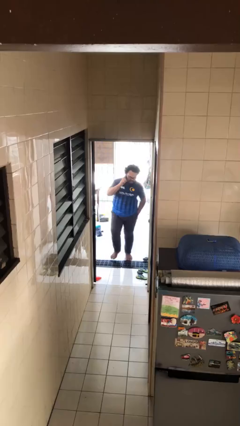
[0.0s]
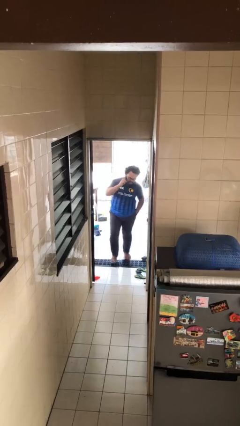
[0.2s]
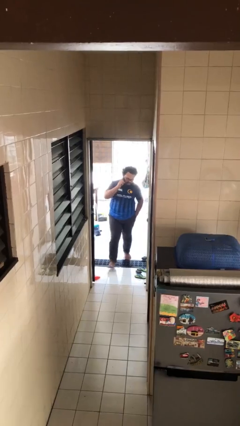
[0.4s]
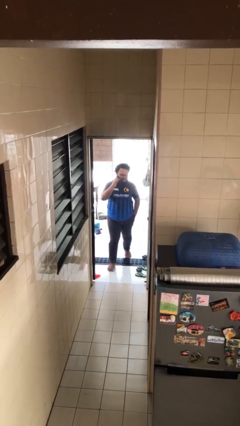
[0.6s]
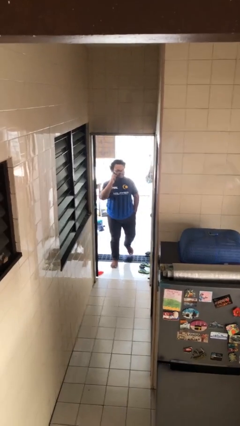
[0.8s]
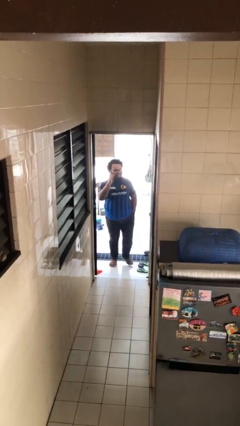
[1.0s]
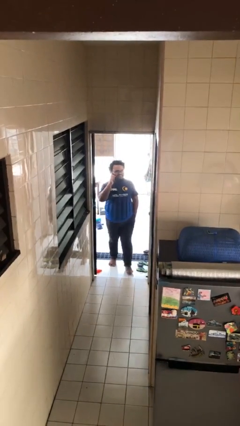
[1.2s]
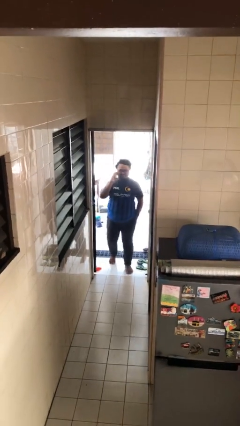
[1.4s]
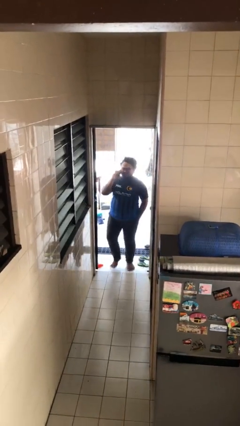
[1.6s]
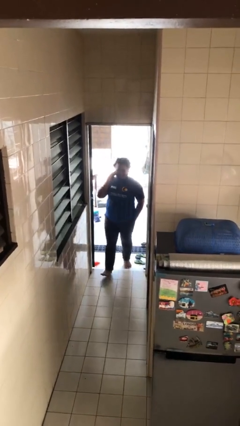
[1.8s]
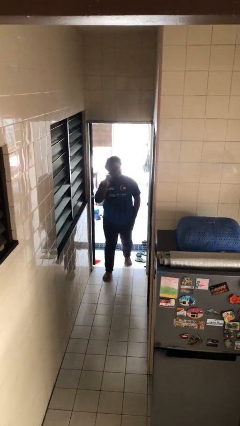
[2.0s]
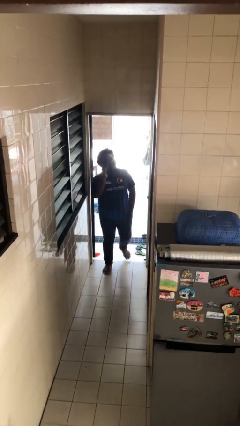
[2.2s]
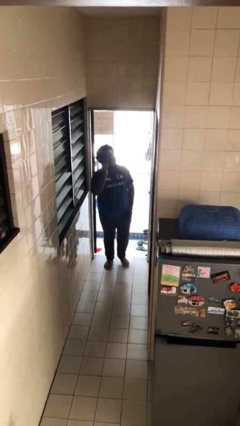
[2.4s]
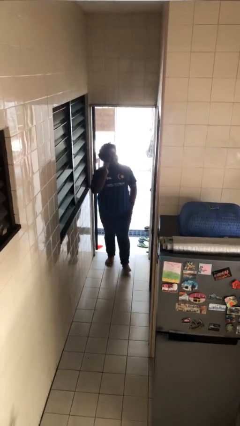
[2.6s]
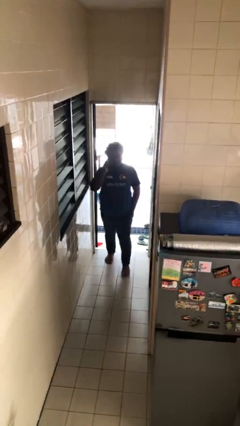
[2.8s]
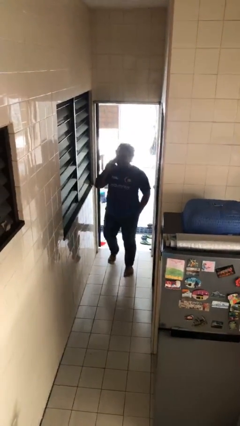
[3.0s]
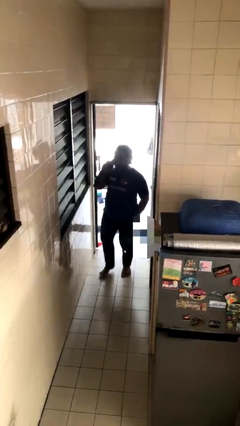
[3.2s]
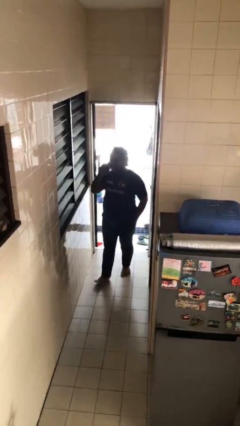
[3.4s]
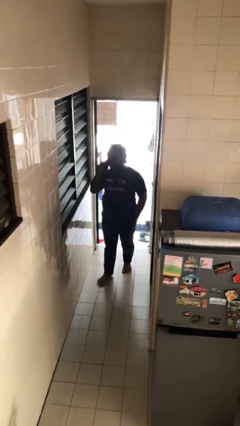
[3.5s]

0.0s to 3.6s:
person enters scene through structure

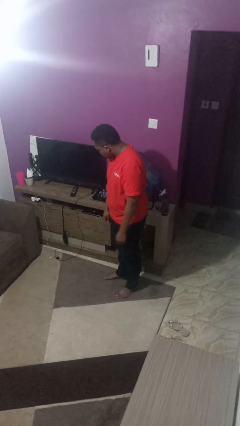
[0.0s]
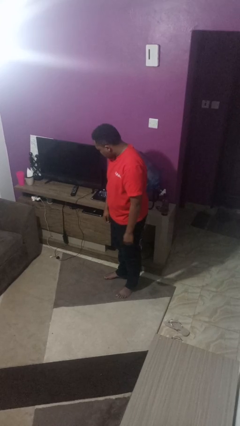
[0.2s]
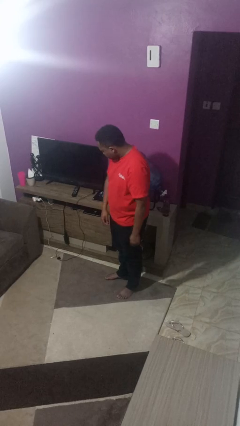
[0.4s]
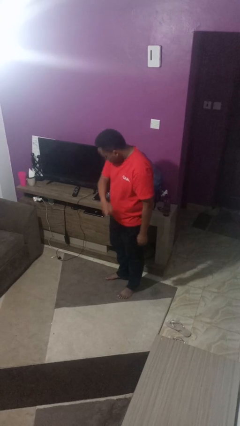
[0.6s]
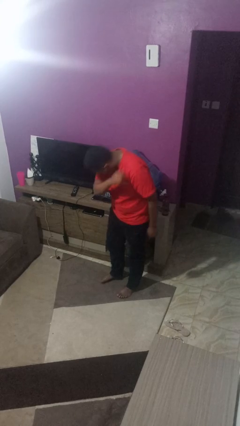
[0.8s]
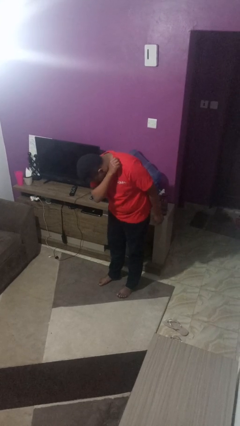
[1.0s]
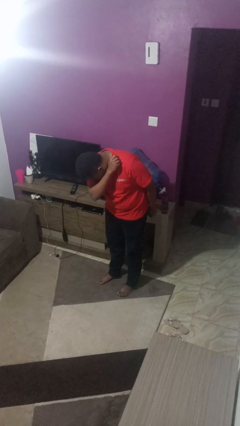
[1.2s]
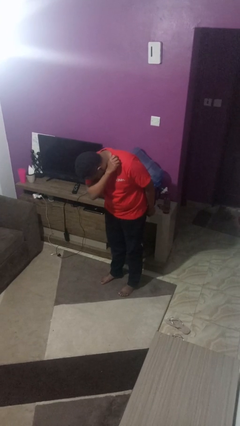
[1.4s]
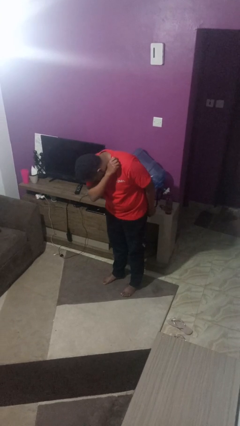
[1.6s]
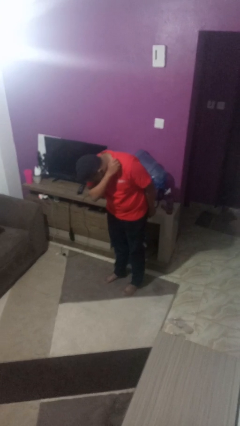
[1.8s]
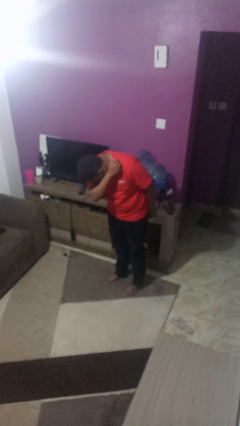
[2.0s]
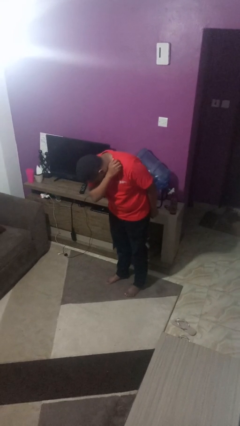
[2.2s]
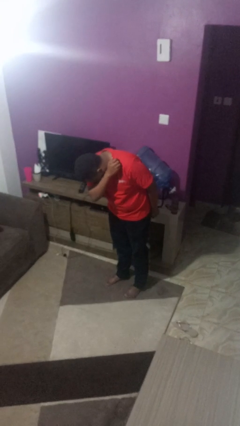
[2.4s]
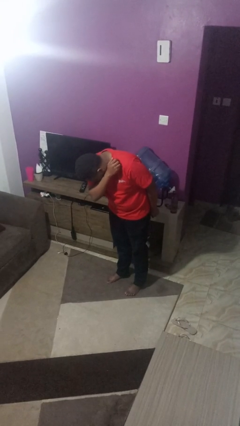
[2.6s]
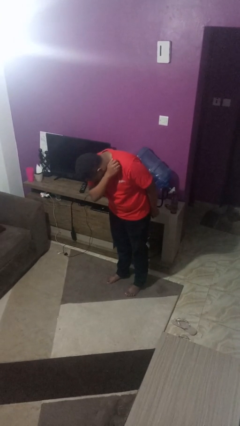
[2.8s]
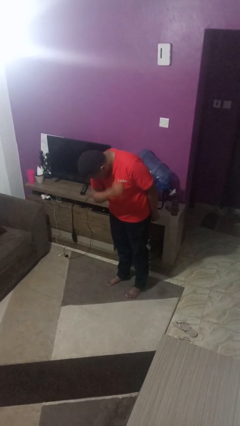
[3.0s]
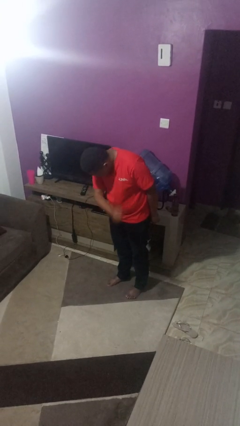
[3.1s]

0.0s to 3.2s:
person sneezes into arm

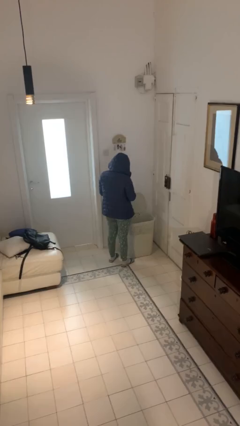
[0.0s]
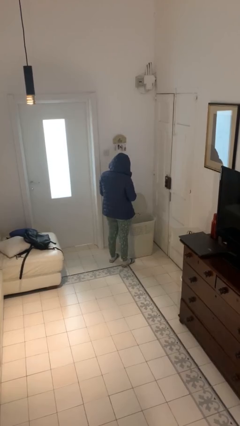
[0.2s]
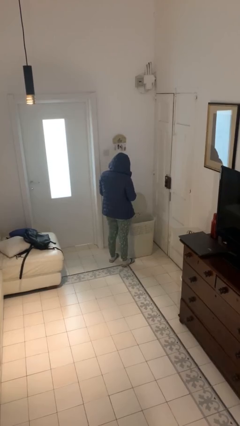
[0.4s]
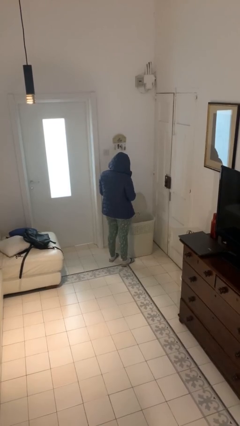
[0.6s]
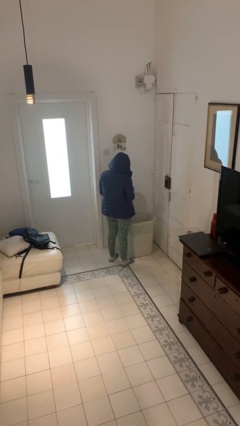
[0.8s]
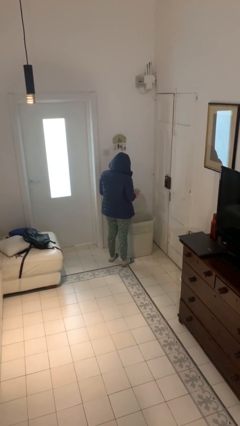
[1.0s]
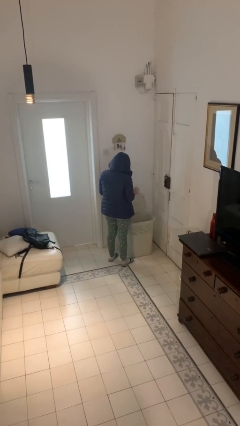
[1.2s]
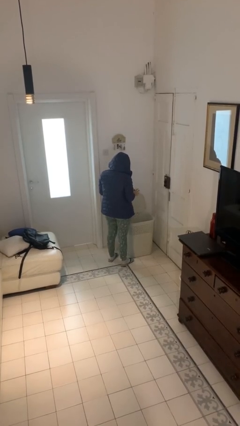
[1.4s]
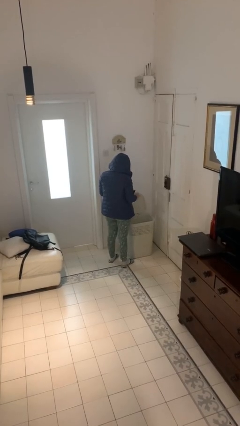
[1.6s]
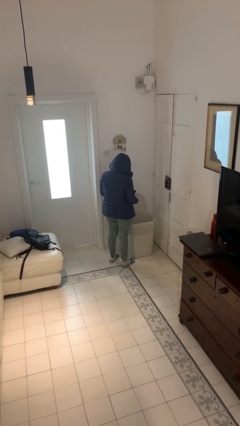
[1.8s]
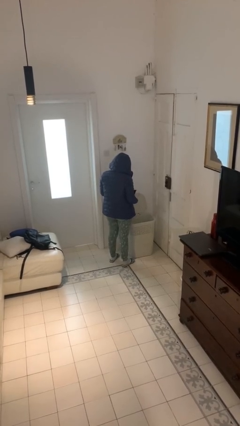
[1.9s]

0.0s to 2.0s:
person discards trash

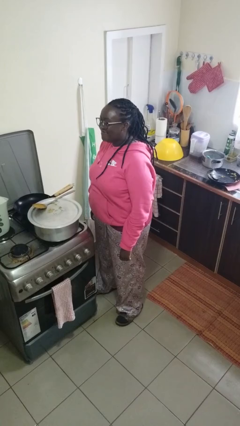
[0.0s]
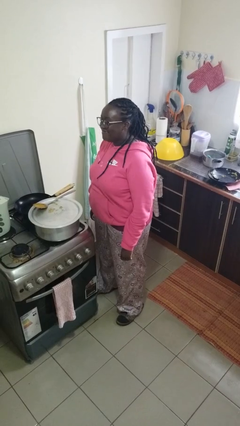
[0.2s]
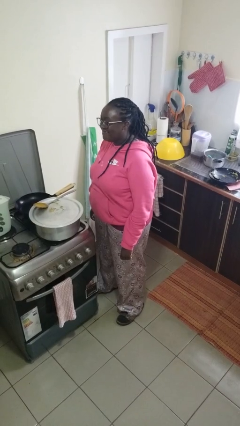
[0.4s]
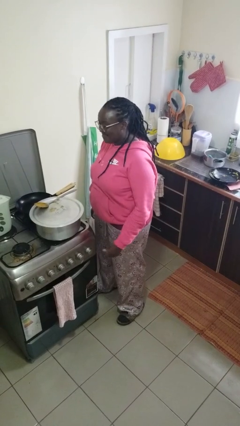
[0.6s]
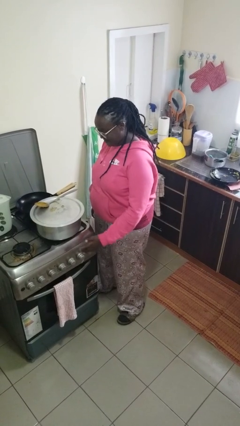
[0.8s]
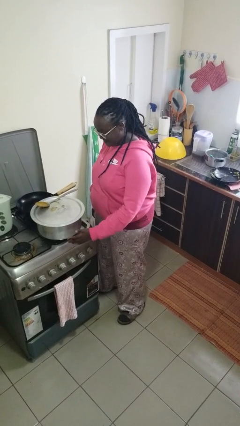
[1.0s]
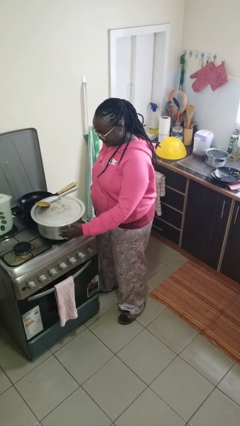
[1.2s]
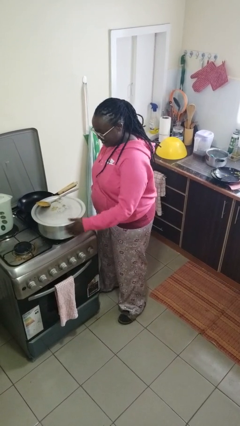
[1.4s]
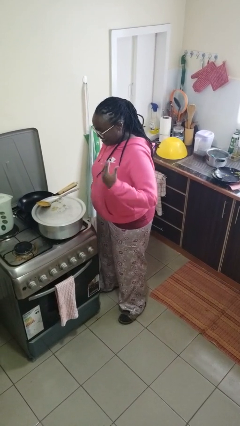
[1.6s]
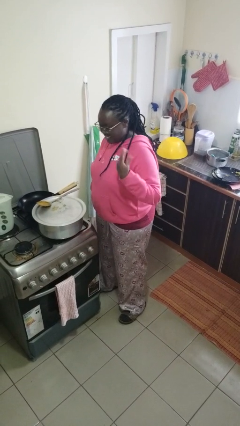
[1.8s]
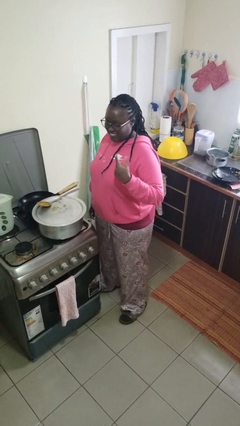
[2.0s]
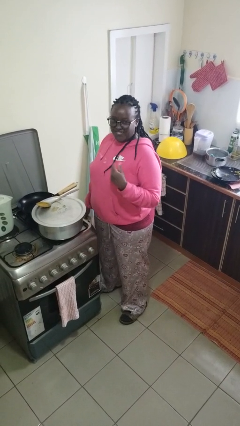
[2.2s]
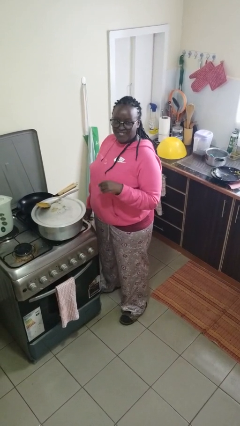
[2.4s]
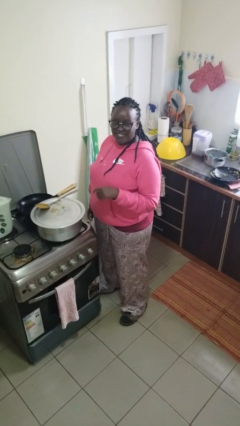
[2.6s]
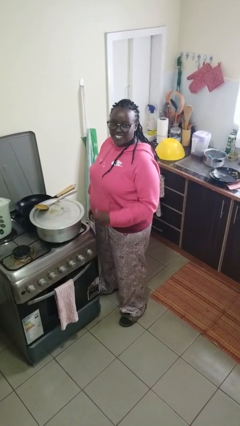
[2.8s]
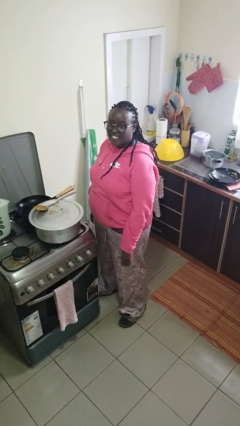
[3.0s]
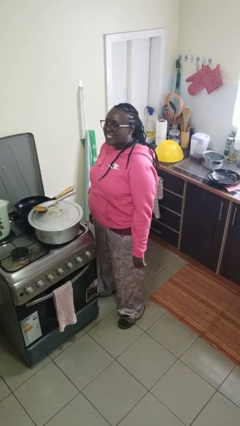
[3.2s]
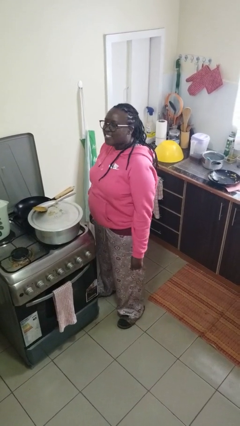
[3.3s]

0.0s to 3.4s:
person burns hand

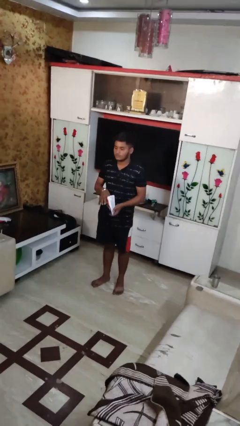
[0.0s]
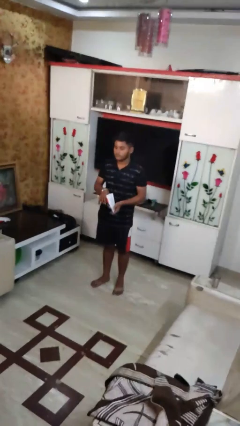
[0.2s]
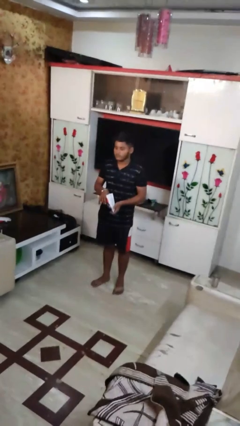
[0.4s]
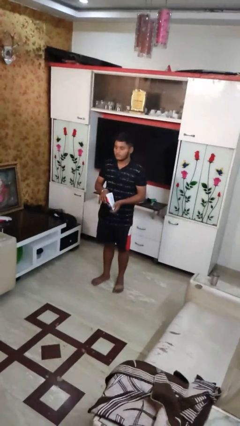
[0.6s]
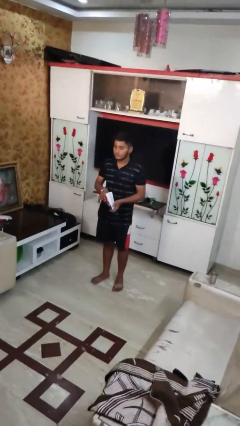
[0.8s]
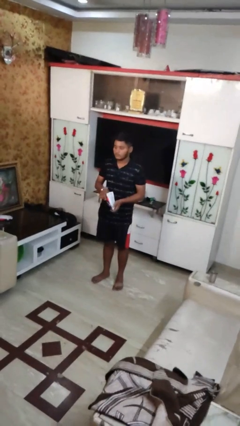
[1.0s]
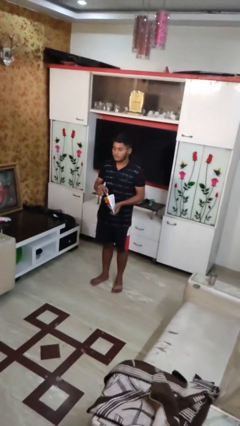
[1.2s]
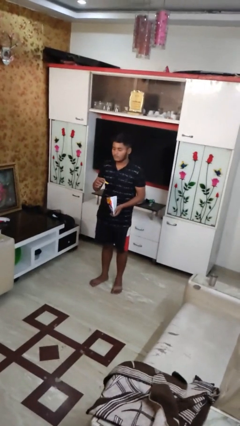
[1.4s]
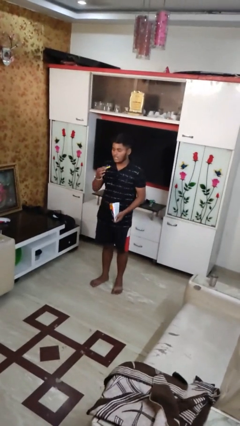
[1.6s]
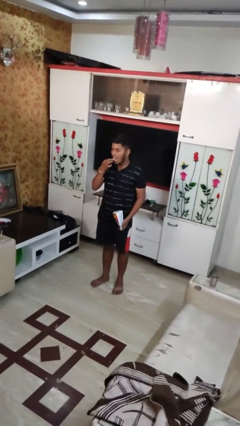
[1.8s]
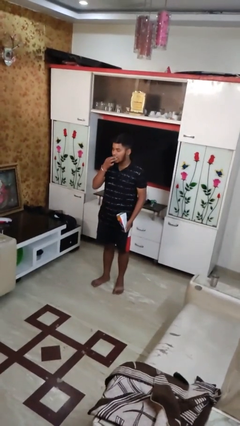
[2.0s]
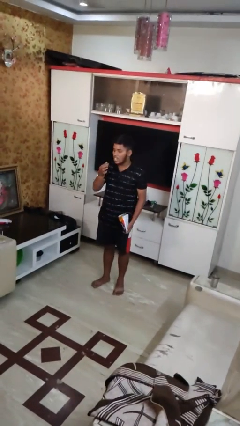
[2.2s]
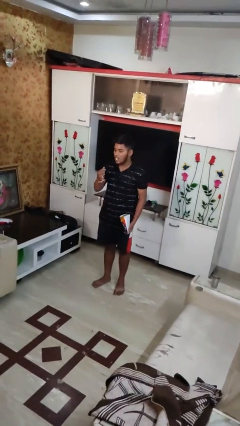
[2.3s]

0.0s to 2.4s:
person eats snack from bag

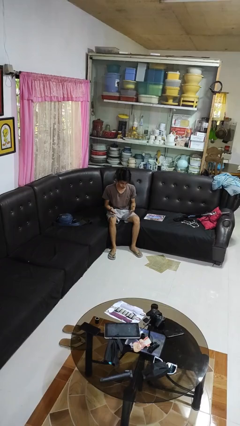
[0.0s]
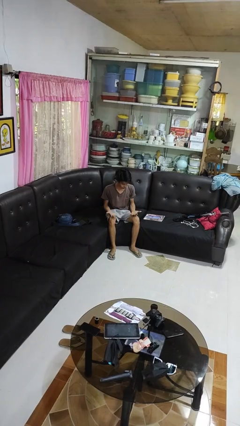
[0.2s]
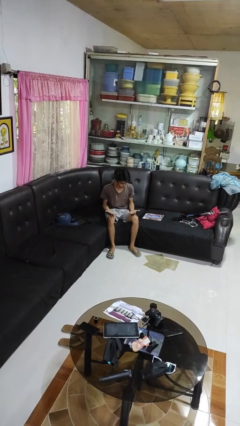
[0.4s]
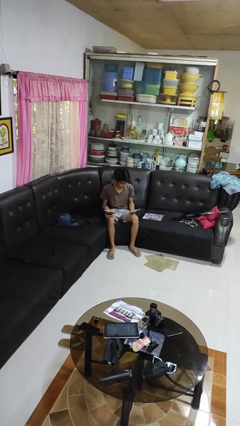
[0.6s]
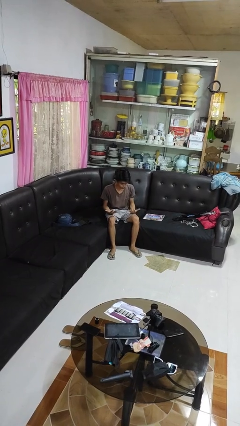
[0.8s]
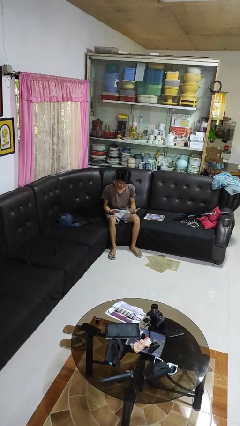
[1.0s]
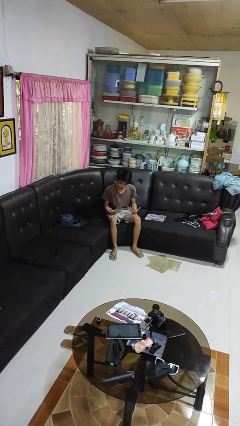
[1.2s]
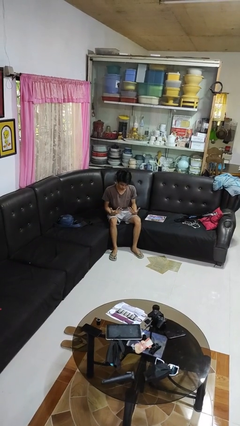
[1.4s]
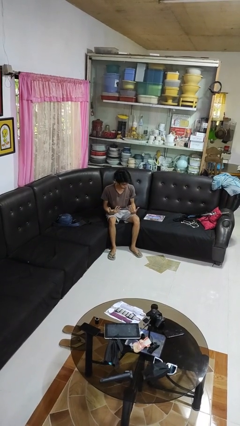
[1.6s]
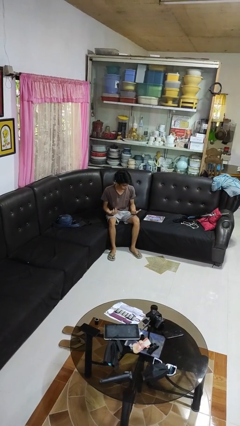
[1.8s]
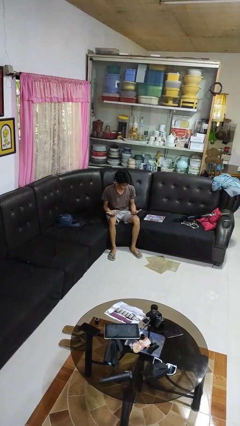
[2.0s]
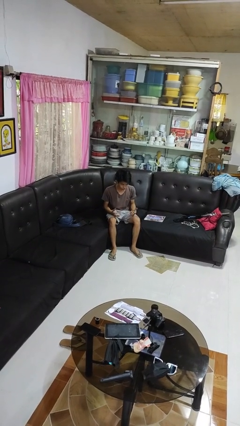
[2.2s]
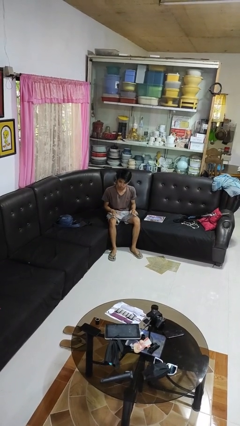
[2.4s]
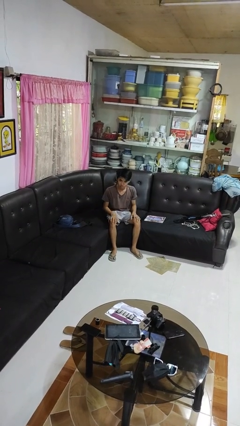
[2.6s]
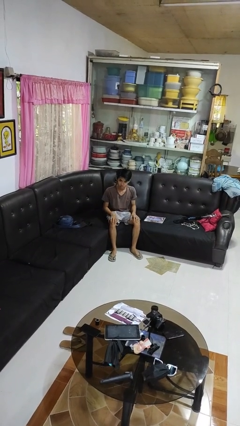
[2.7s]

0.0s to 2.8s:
person looks at hands in lap

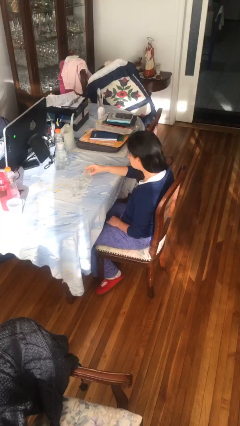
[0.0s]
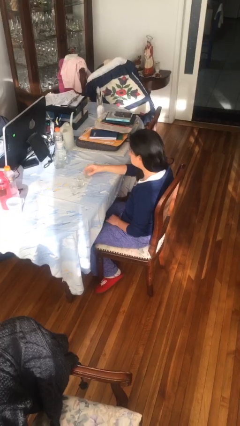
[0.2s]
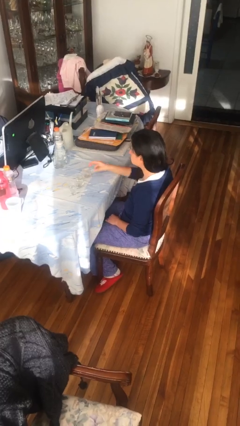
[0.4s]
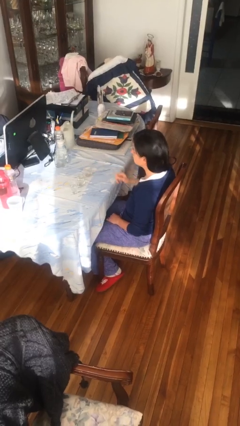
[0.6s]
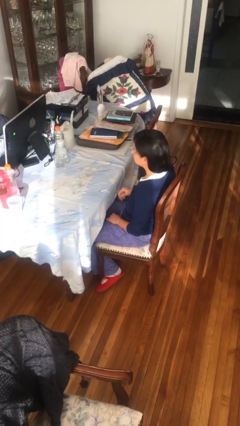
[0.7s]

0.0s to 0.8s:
person puts down object on table
